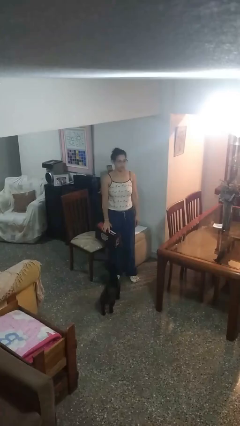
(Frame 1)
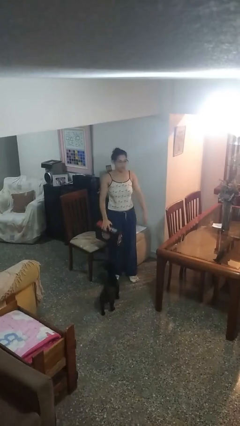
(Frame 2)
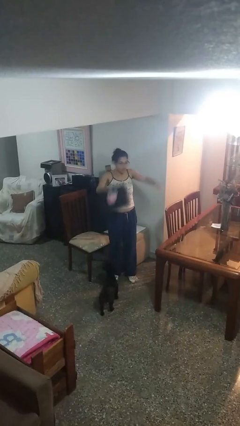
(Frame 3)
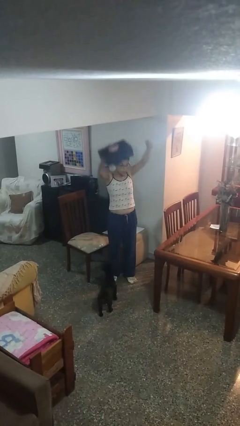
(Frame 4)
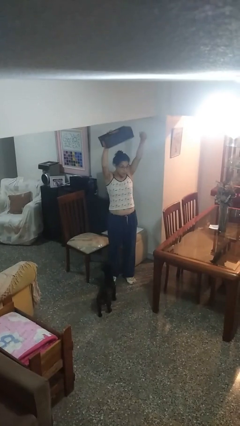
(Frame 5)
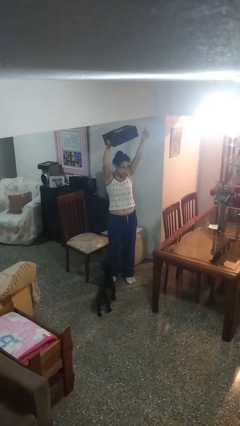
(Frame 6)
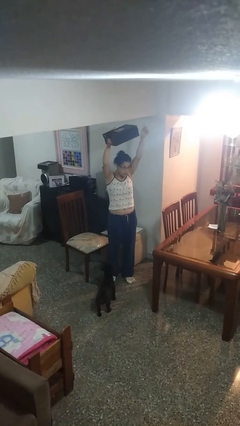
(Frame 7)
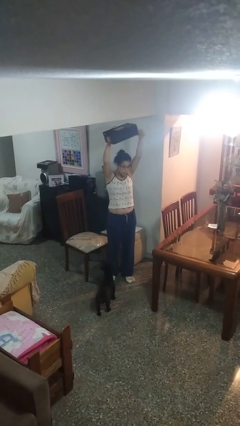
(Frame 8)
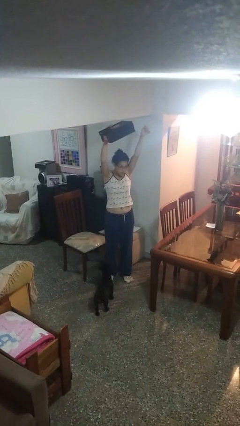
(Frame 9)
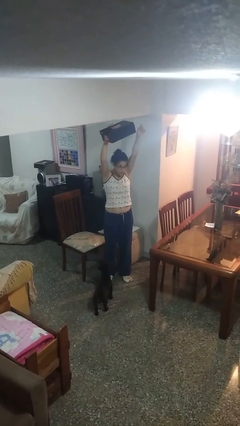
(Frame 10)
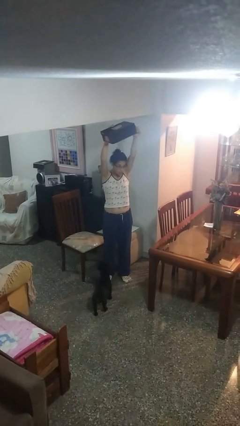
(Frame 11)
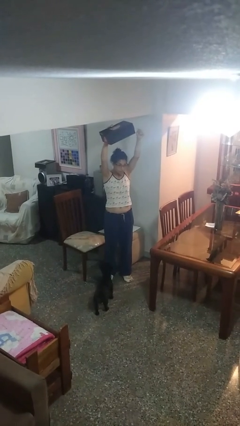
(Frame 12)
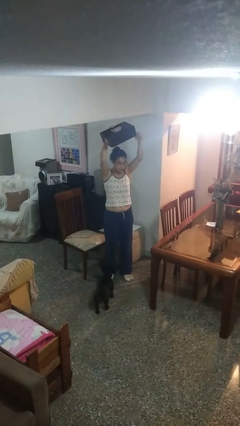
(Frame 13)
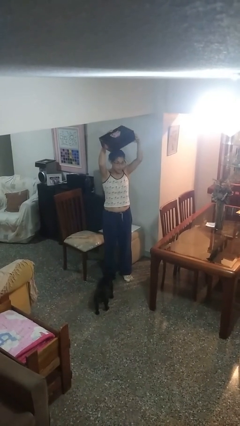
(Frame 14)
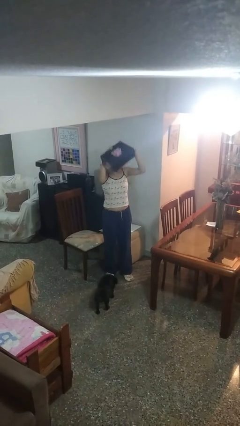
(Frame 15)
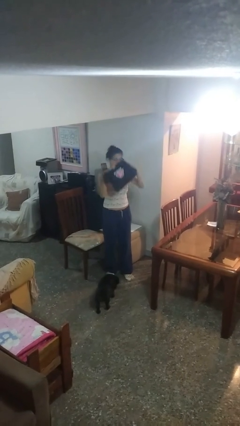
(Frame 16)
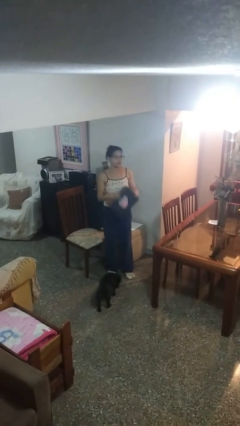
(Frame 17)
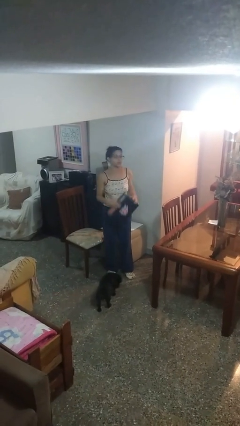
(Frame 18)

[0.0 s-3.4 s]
person holds object above head

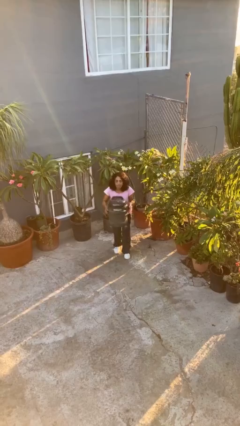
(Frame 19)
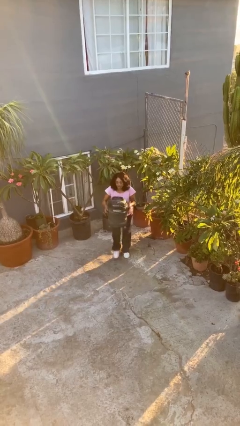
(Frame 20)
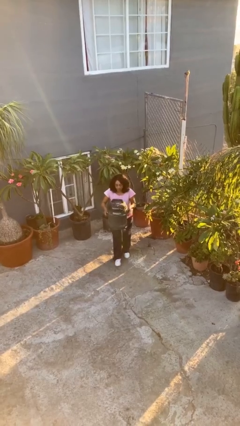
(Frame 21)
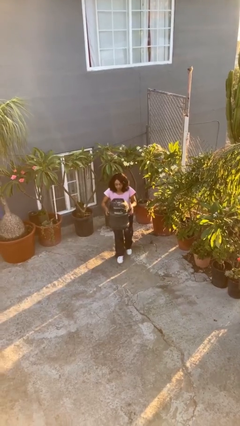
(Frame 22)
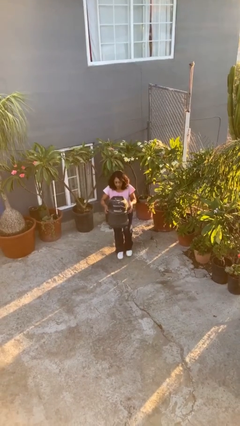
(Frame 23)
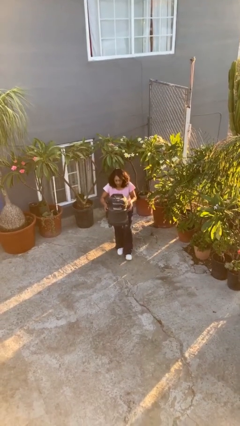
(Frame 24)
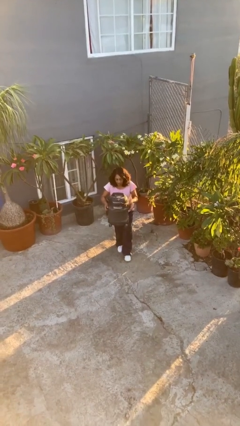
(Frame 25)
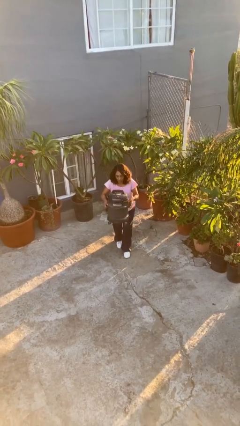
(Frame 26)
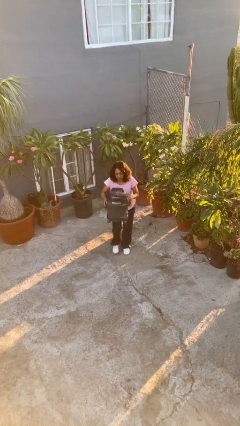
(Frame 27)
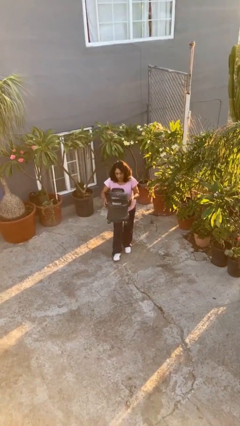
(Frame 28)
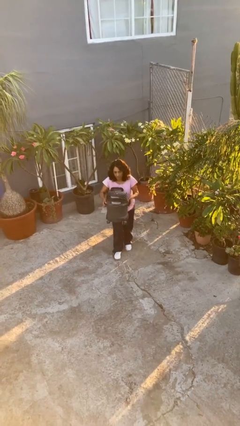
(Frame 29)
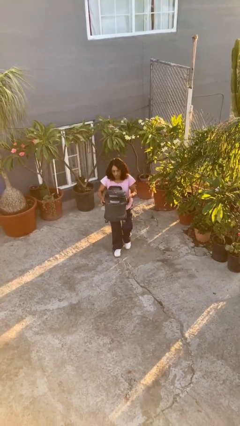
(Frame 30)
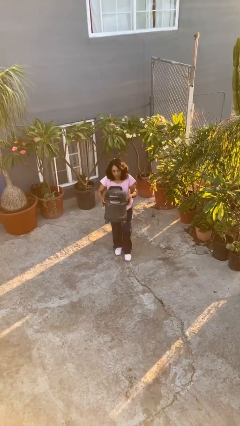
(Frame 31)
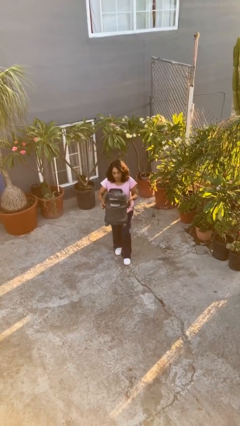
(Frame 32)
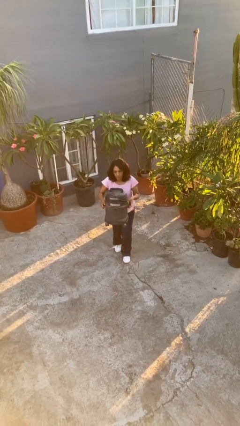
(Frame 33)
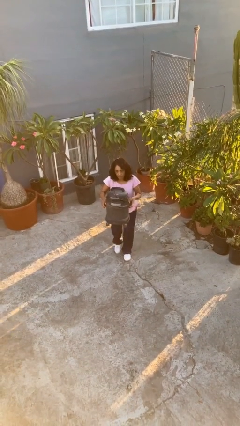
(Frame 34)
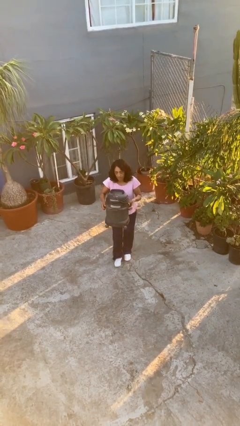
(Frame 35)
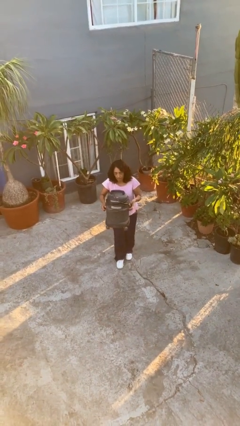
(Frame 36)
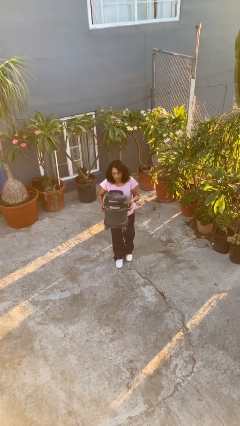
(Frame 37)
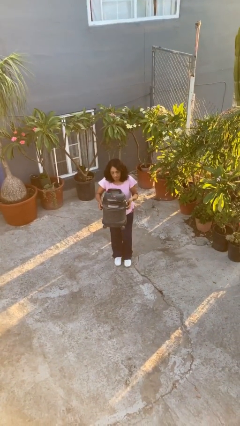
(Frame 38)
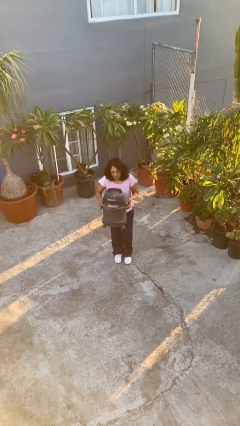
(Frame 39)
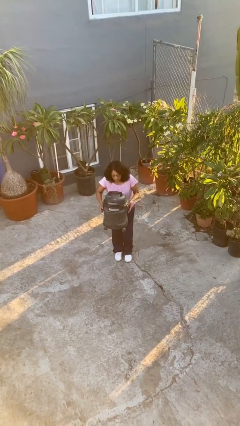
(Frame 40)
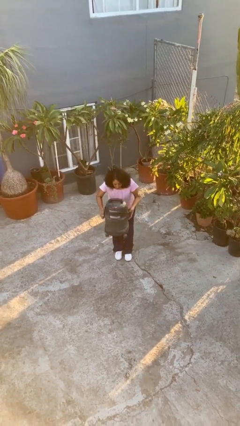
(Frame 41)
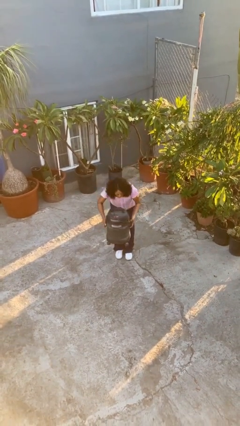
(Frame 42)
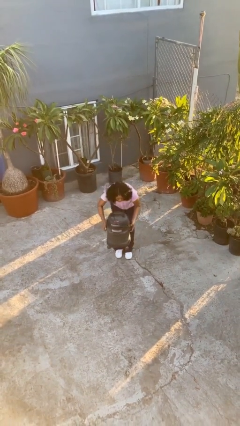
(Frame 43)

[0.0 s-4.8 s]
person carries heavy object

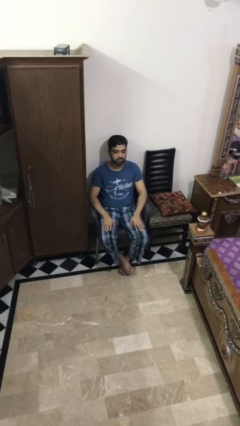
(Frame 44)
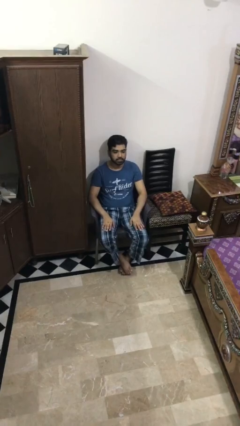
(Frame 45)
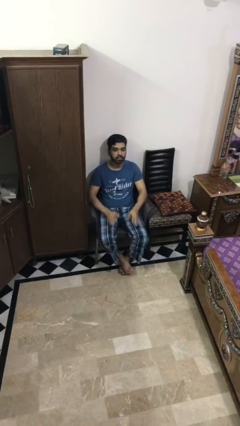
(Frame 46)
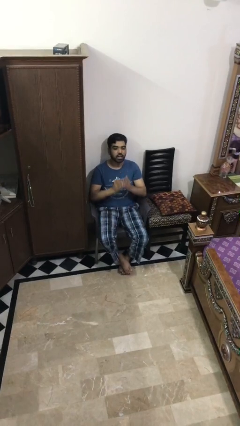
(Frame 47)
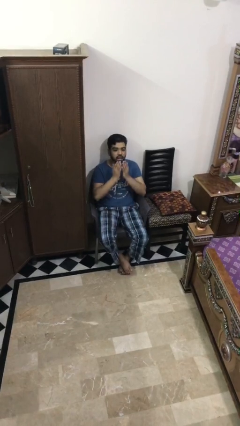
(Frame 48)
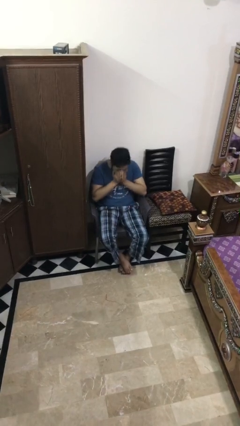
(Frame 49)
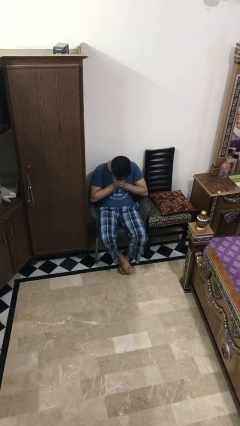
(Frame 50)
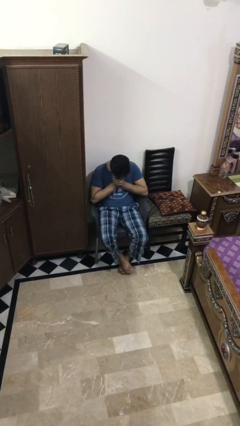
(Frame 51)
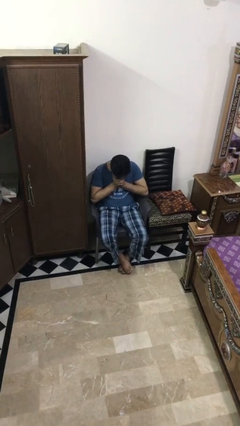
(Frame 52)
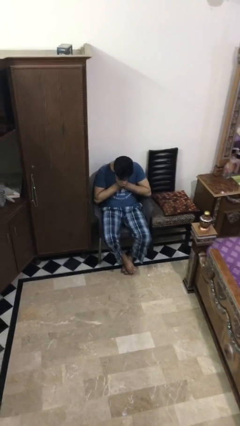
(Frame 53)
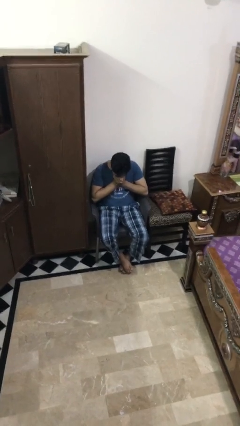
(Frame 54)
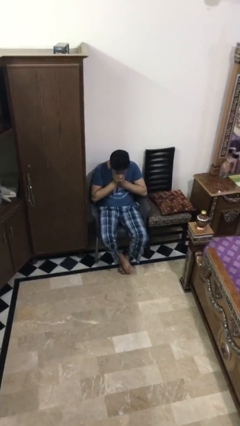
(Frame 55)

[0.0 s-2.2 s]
person sneezes into hand

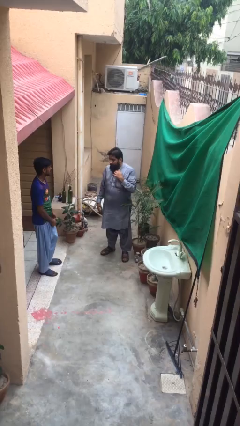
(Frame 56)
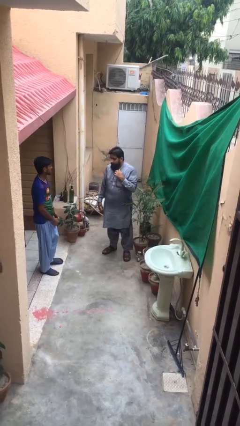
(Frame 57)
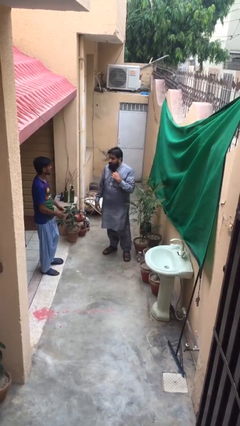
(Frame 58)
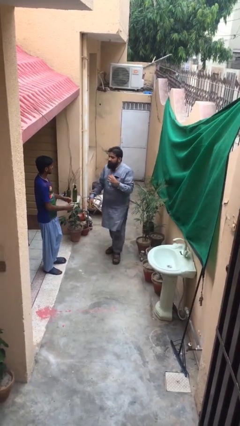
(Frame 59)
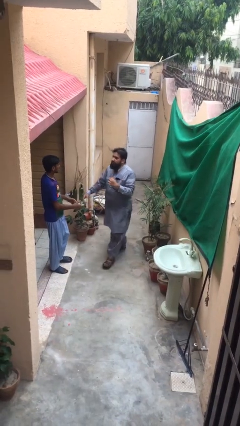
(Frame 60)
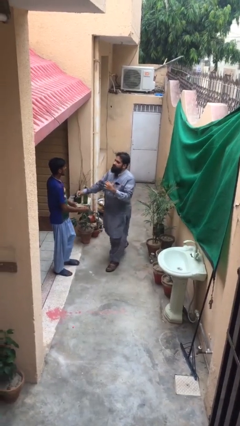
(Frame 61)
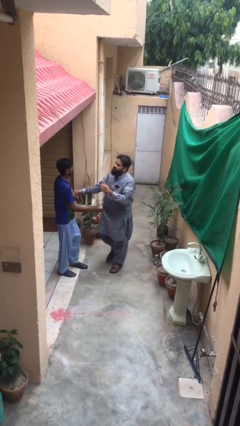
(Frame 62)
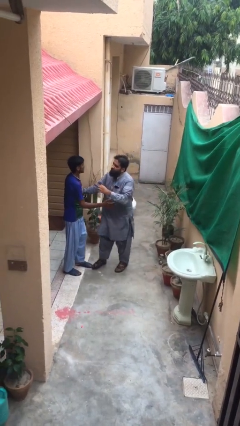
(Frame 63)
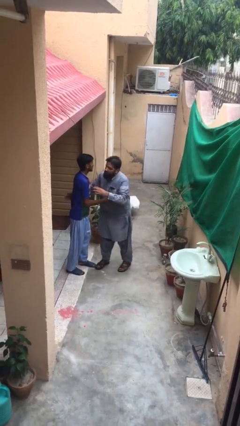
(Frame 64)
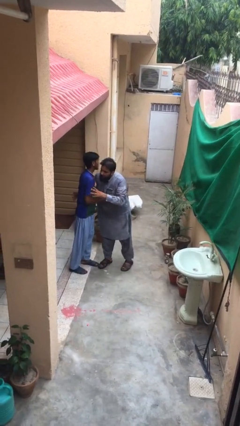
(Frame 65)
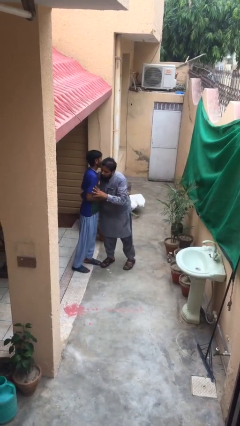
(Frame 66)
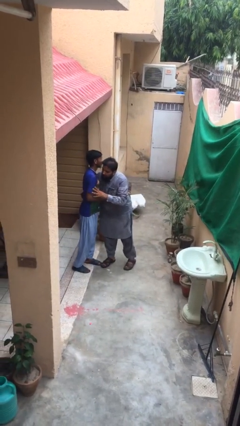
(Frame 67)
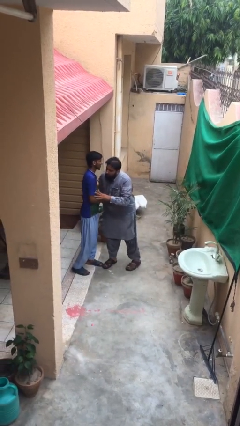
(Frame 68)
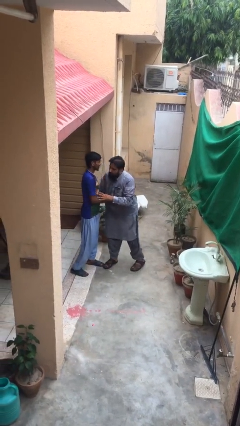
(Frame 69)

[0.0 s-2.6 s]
person embraces person

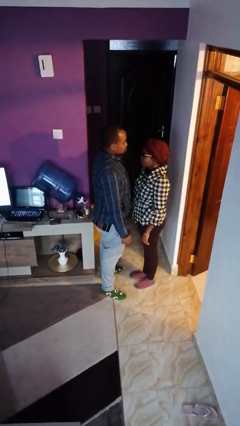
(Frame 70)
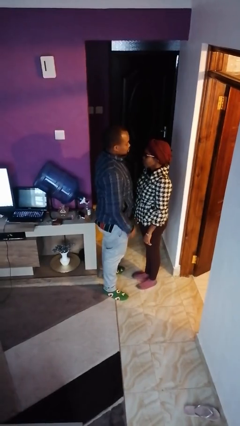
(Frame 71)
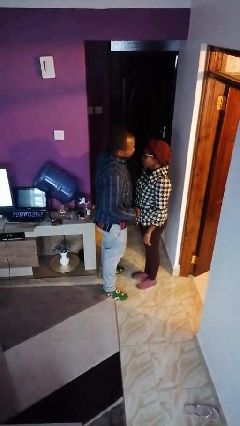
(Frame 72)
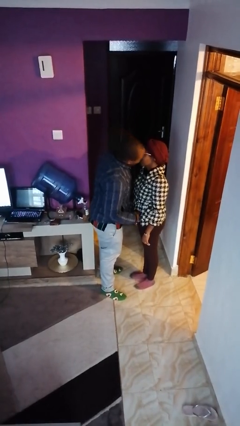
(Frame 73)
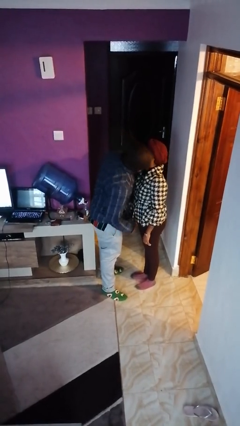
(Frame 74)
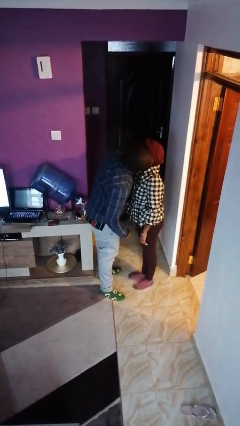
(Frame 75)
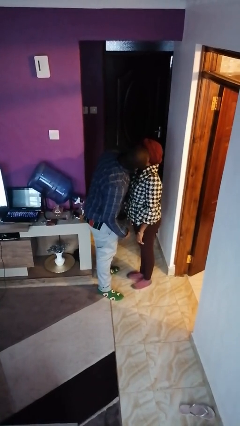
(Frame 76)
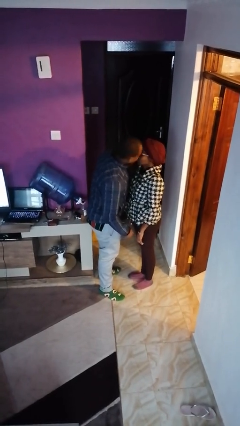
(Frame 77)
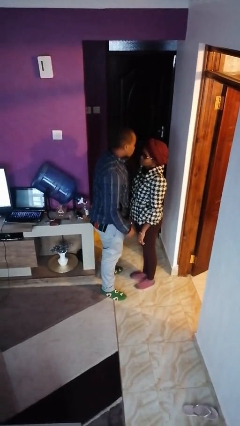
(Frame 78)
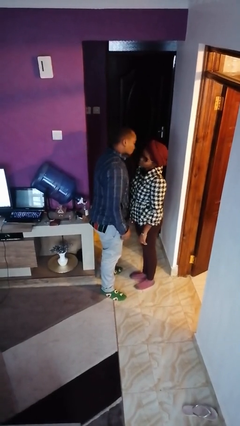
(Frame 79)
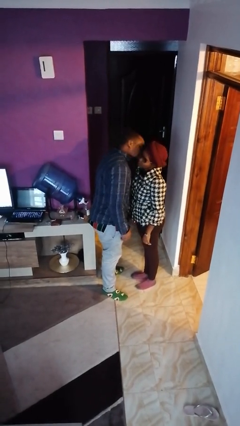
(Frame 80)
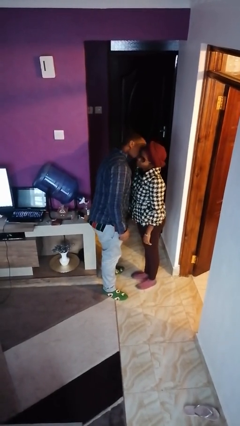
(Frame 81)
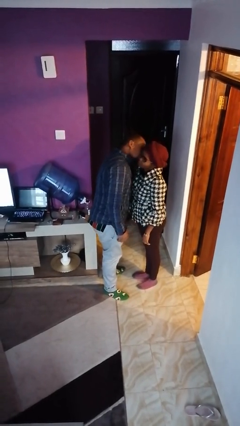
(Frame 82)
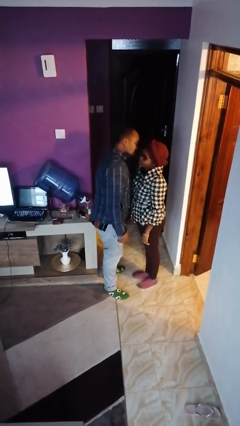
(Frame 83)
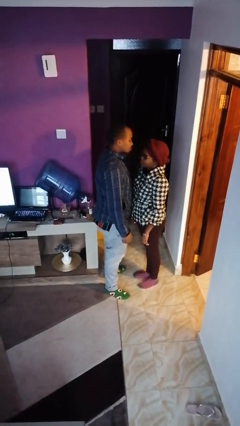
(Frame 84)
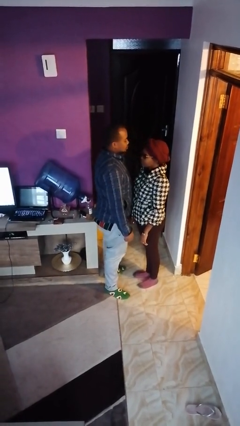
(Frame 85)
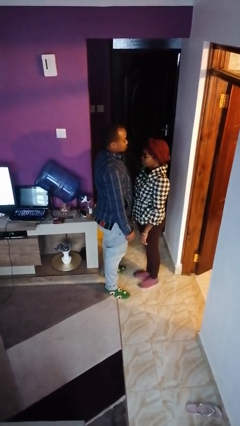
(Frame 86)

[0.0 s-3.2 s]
person kisses cheek of person

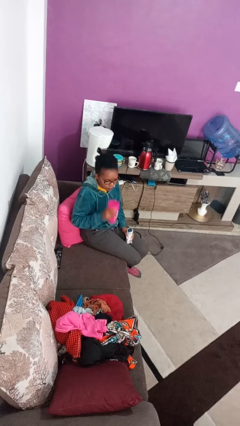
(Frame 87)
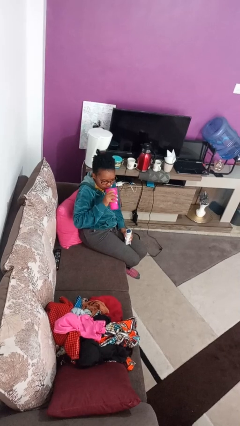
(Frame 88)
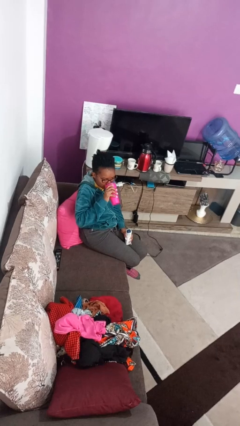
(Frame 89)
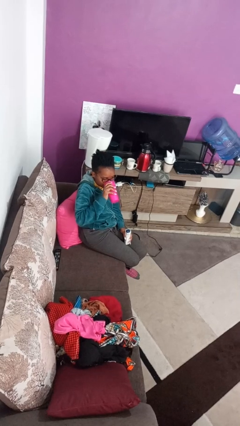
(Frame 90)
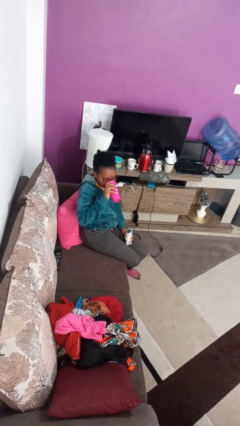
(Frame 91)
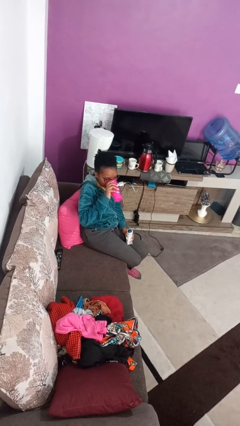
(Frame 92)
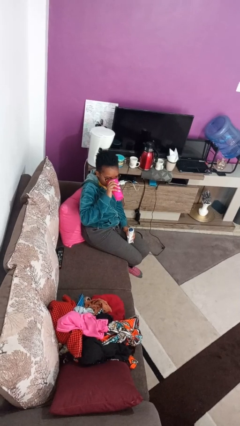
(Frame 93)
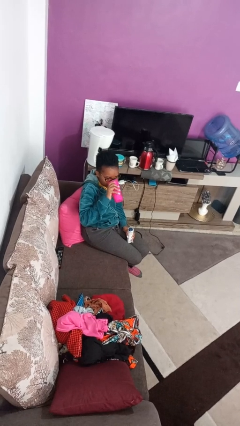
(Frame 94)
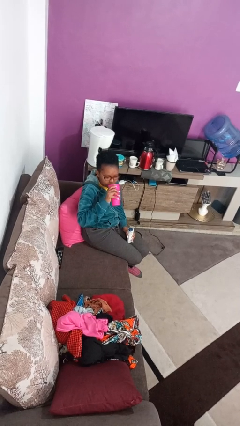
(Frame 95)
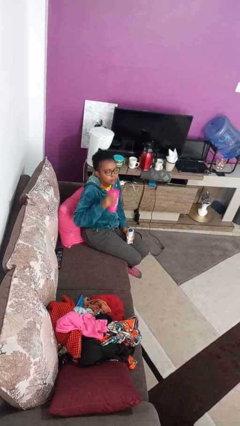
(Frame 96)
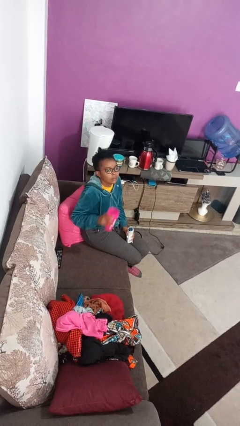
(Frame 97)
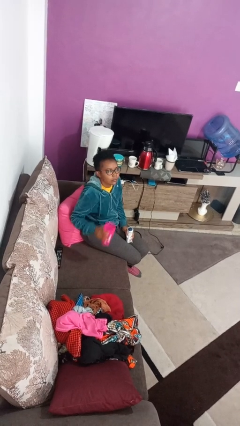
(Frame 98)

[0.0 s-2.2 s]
person drinks from cup
